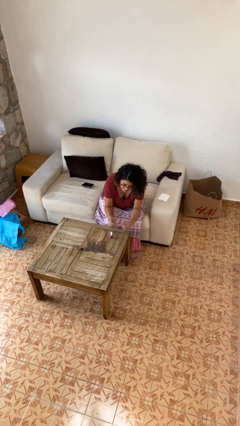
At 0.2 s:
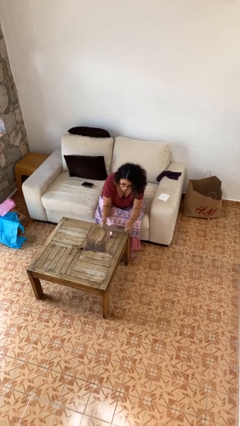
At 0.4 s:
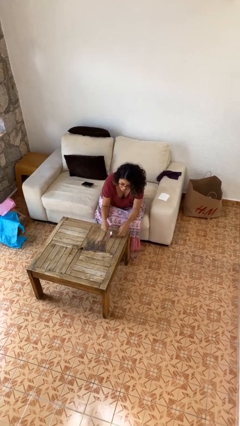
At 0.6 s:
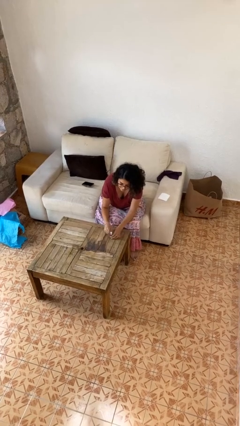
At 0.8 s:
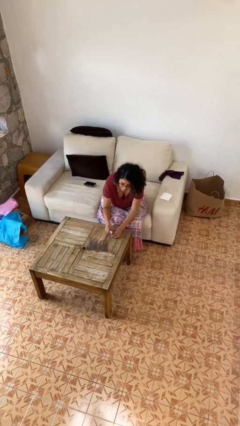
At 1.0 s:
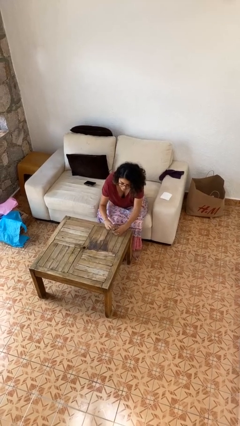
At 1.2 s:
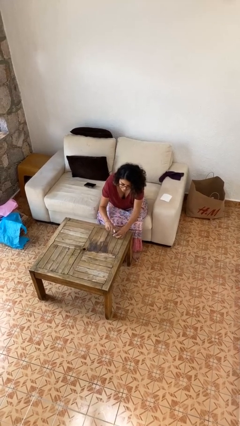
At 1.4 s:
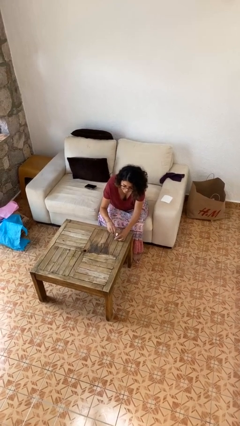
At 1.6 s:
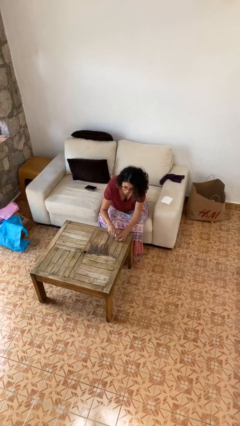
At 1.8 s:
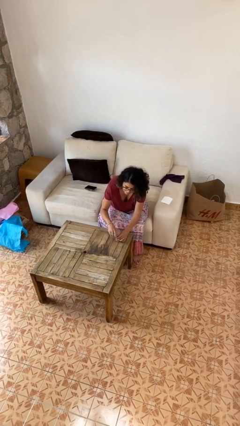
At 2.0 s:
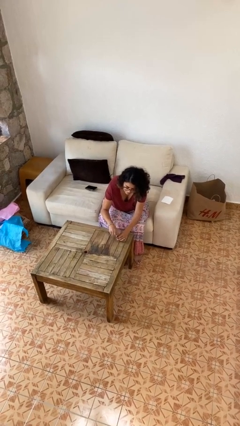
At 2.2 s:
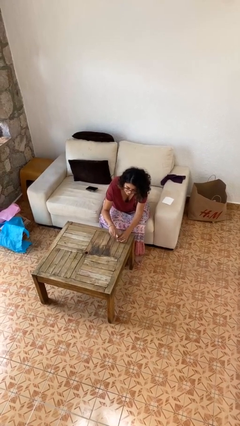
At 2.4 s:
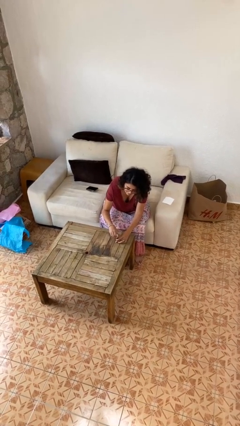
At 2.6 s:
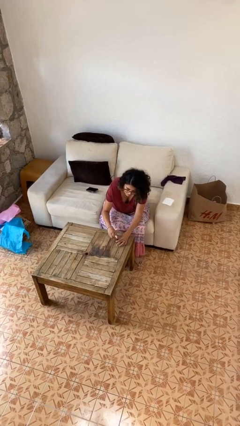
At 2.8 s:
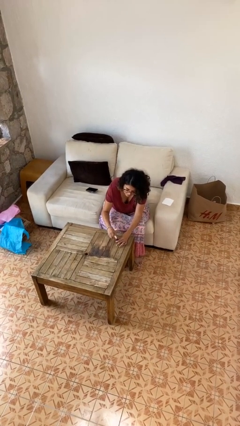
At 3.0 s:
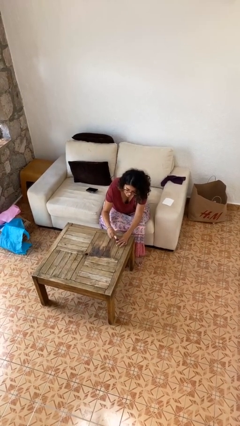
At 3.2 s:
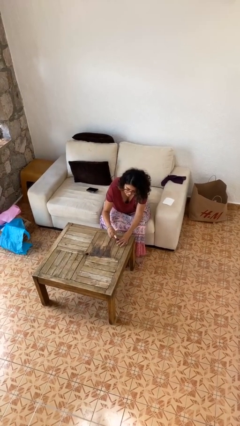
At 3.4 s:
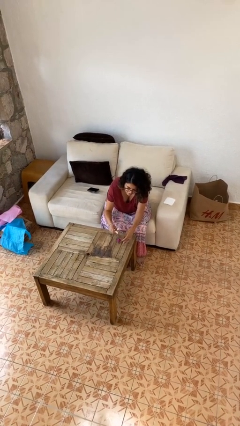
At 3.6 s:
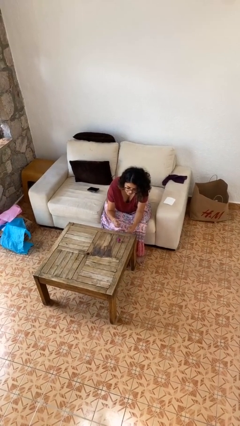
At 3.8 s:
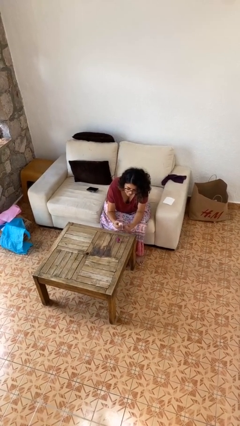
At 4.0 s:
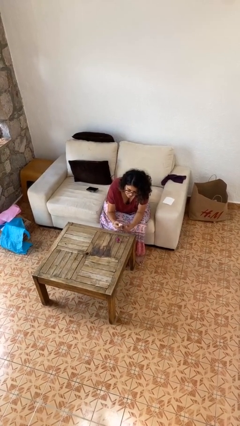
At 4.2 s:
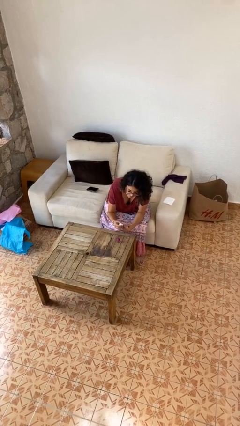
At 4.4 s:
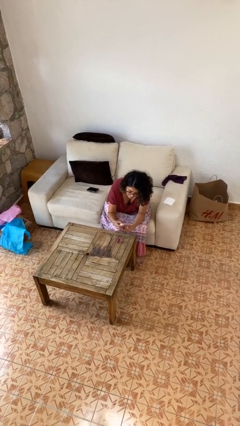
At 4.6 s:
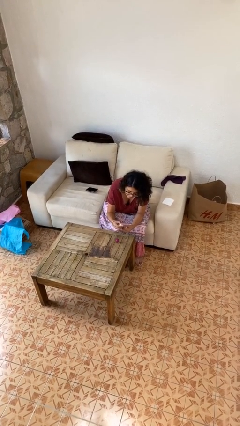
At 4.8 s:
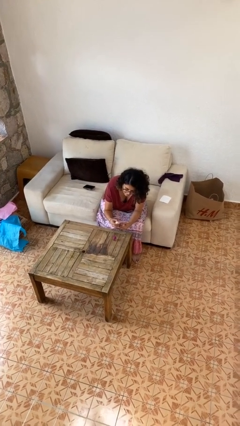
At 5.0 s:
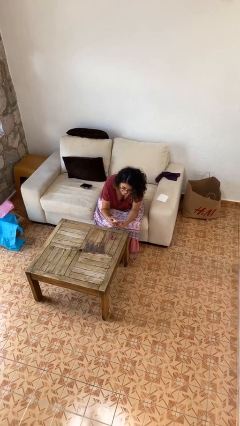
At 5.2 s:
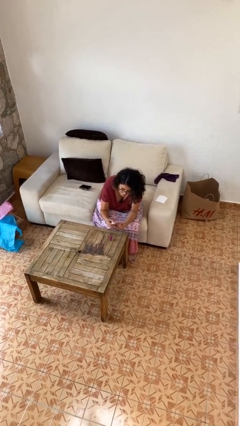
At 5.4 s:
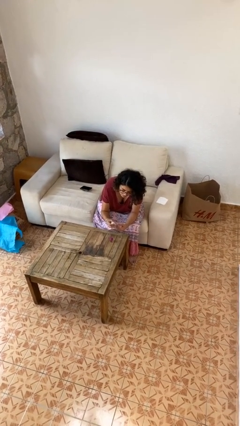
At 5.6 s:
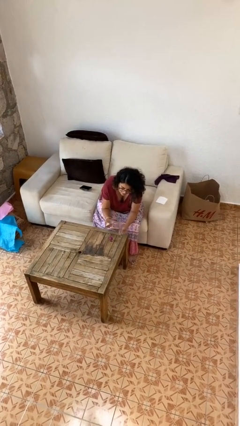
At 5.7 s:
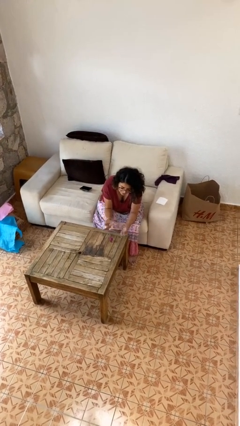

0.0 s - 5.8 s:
person paints fingernails

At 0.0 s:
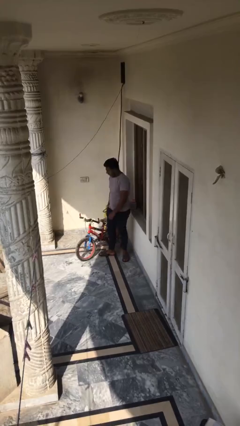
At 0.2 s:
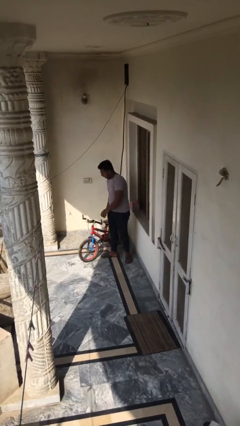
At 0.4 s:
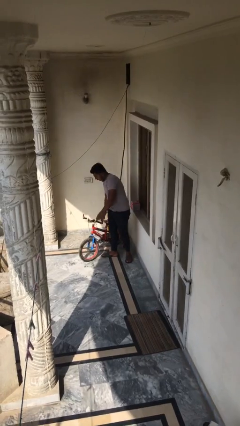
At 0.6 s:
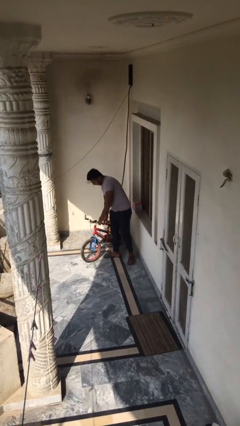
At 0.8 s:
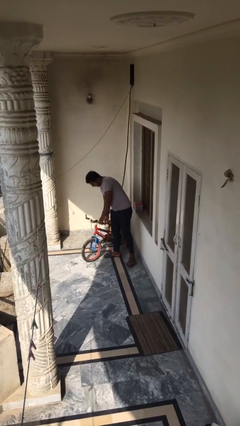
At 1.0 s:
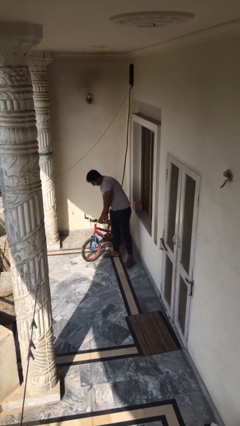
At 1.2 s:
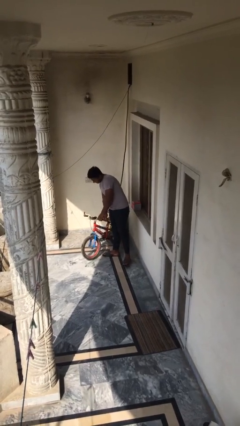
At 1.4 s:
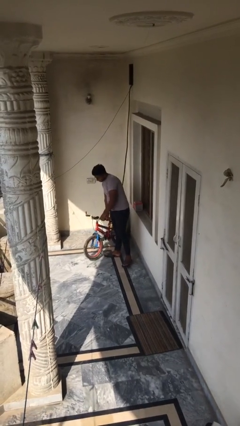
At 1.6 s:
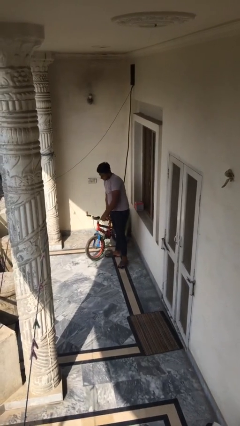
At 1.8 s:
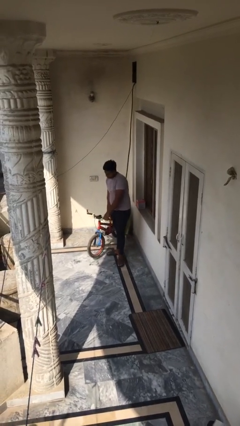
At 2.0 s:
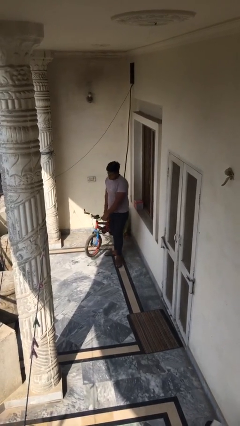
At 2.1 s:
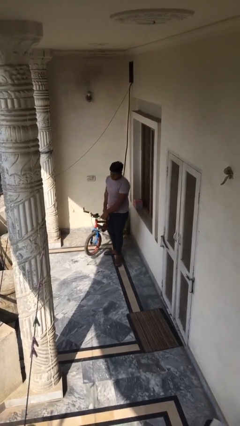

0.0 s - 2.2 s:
person picks up object from floor

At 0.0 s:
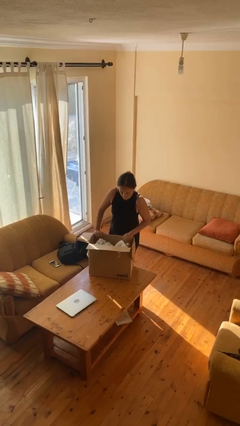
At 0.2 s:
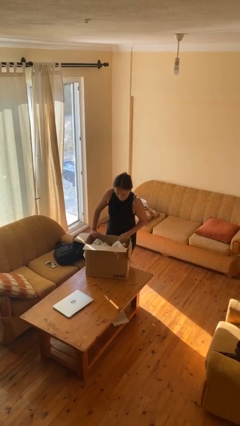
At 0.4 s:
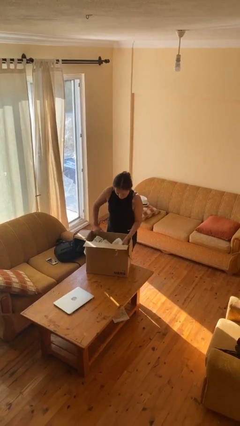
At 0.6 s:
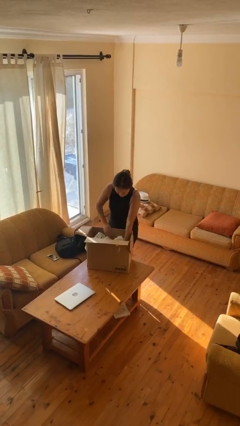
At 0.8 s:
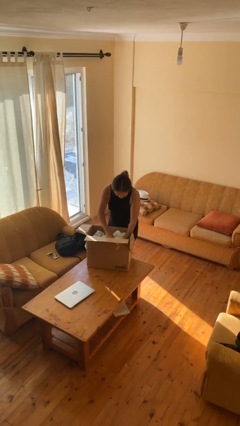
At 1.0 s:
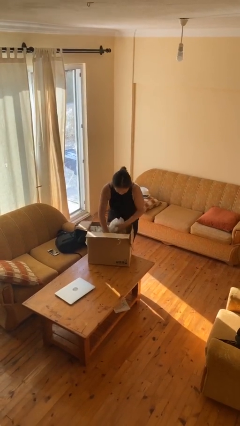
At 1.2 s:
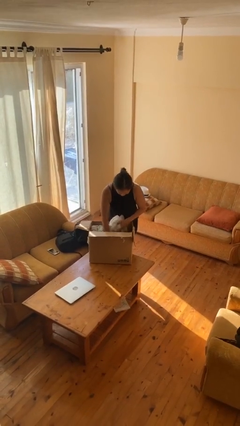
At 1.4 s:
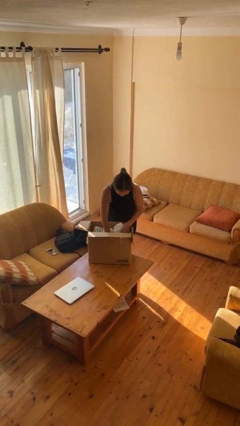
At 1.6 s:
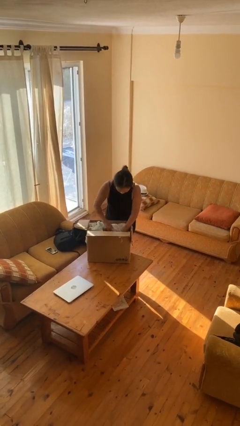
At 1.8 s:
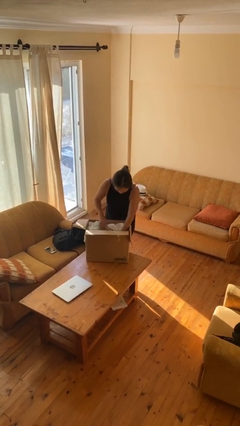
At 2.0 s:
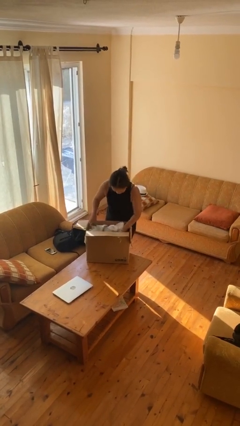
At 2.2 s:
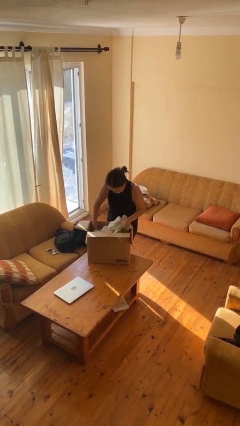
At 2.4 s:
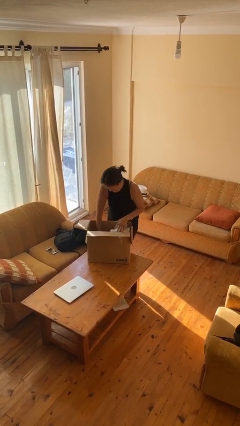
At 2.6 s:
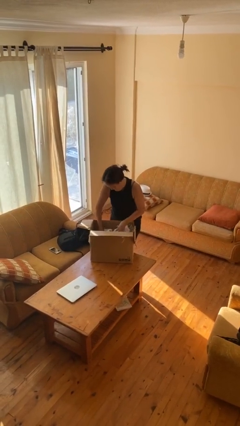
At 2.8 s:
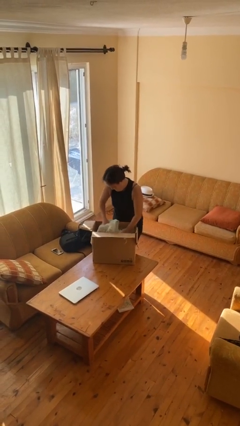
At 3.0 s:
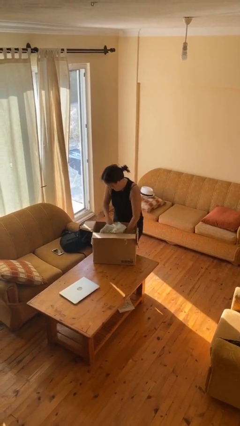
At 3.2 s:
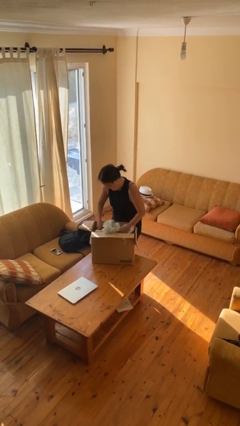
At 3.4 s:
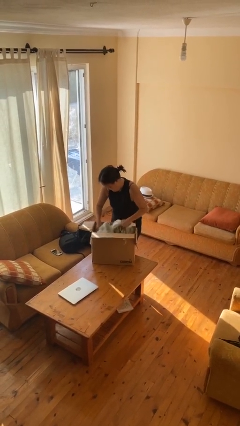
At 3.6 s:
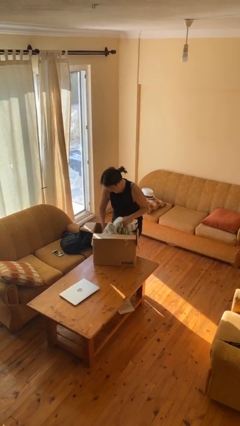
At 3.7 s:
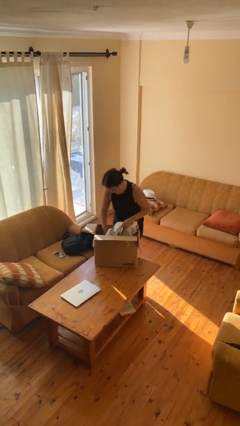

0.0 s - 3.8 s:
person searches in box

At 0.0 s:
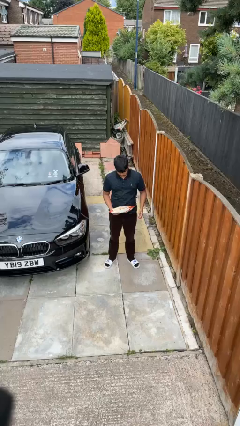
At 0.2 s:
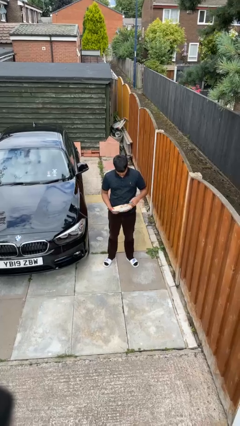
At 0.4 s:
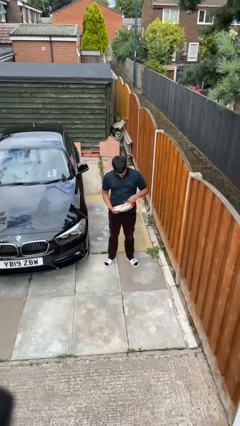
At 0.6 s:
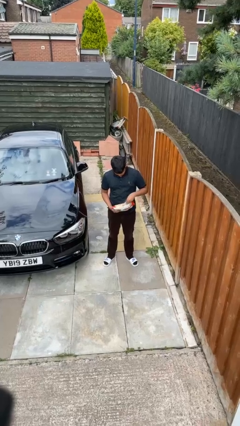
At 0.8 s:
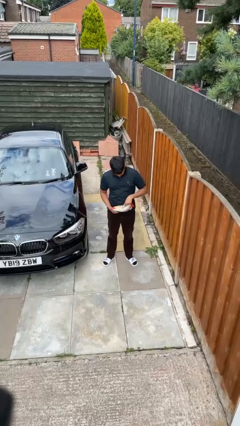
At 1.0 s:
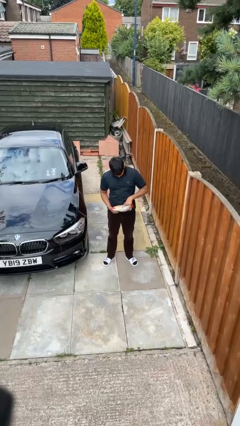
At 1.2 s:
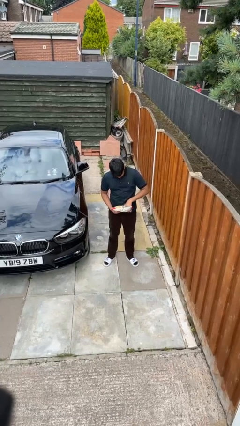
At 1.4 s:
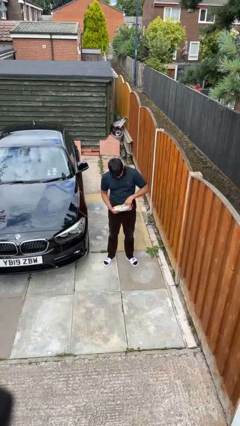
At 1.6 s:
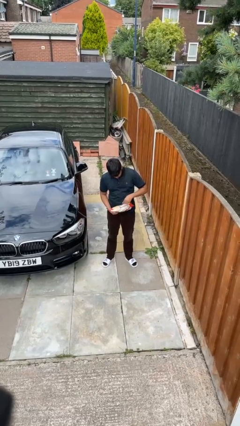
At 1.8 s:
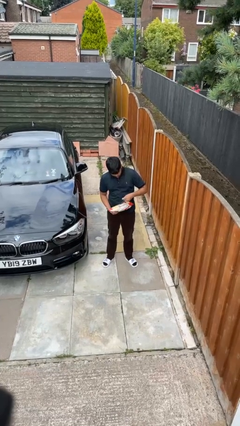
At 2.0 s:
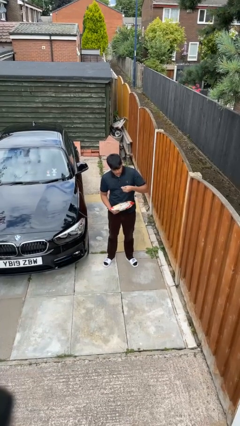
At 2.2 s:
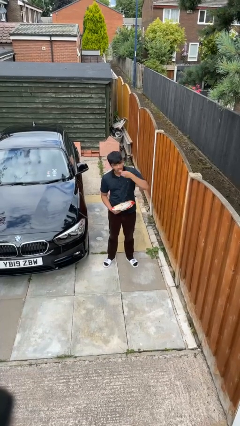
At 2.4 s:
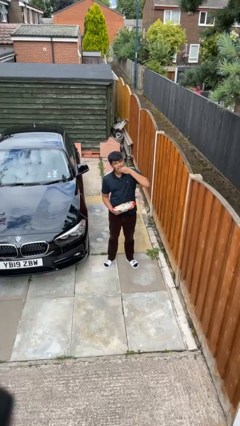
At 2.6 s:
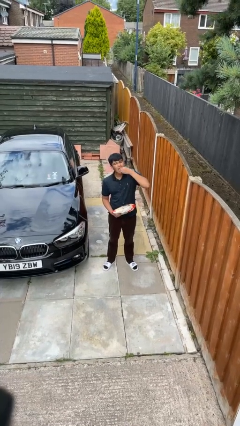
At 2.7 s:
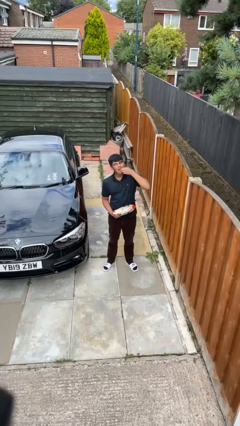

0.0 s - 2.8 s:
person eats snack from bag

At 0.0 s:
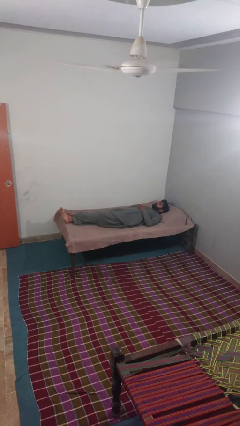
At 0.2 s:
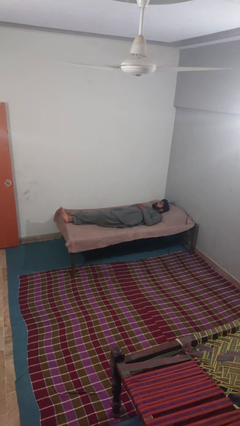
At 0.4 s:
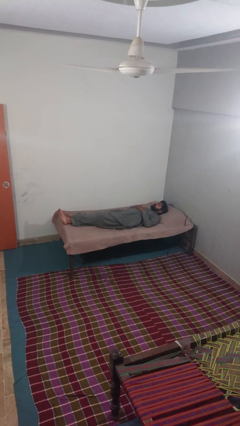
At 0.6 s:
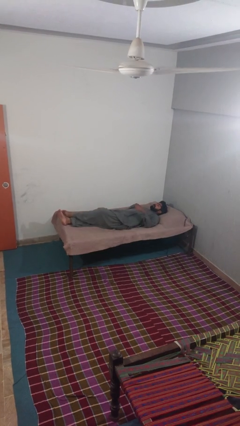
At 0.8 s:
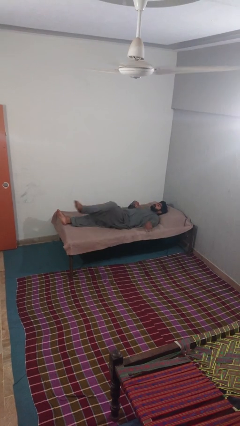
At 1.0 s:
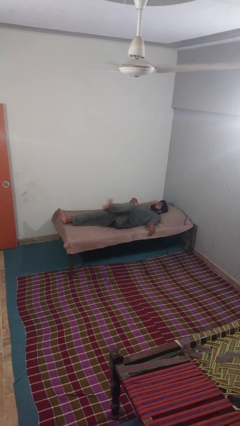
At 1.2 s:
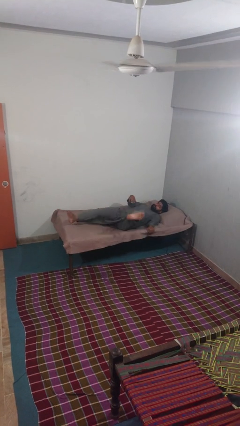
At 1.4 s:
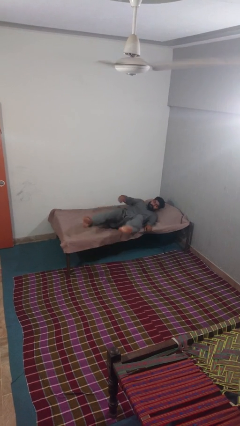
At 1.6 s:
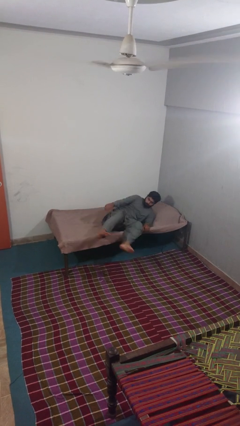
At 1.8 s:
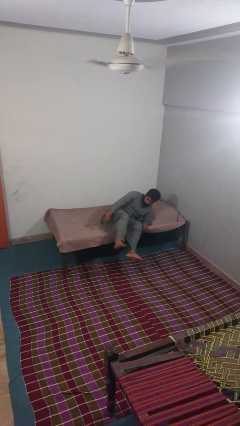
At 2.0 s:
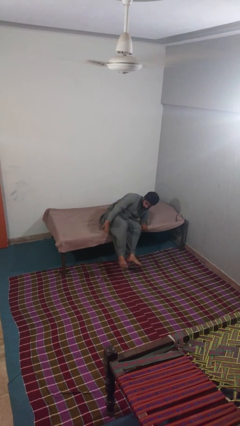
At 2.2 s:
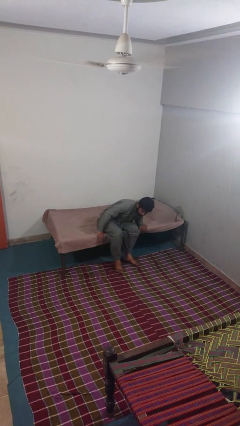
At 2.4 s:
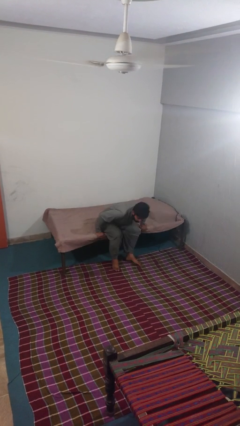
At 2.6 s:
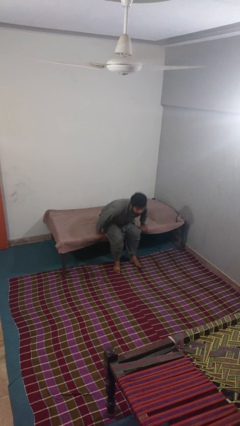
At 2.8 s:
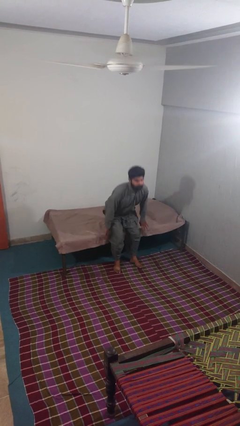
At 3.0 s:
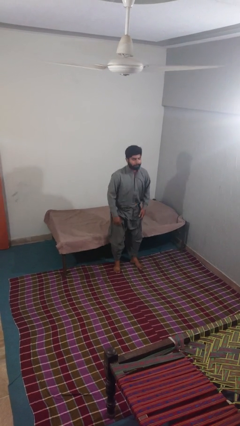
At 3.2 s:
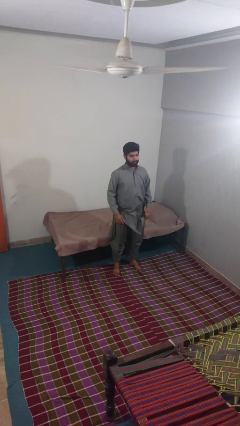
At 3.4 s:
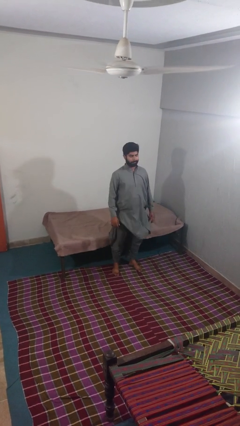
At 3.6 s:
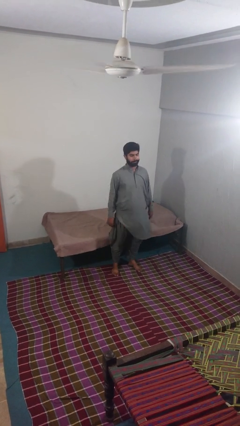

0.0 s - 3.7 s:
person stands up
